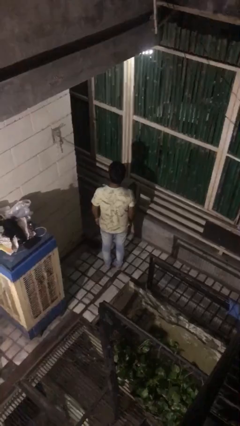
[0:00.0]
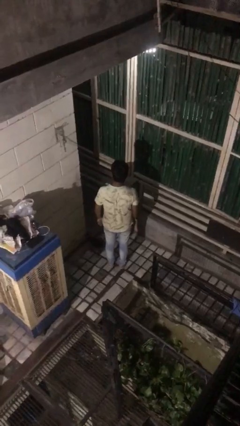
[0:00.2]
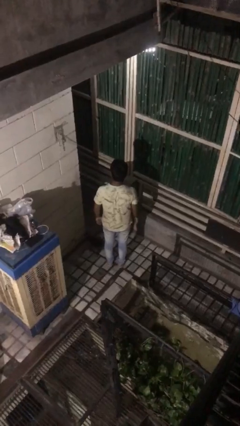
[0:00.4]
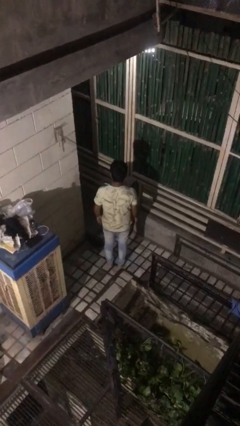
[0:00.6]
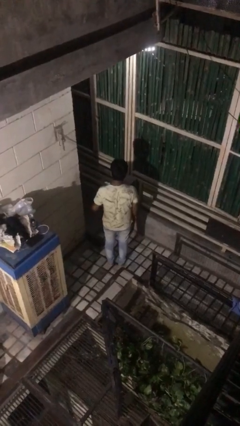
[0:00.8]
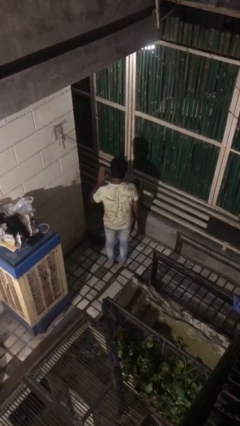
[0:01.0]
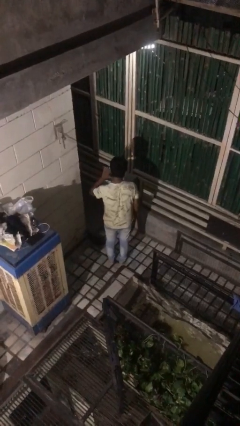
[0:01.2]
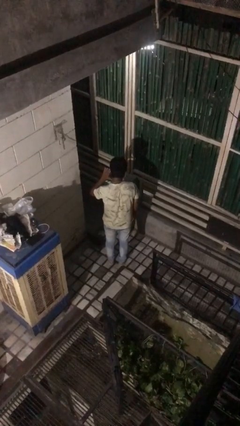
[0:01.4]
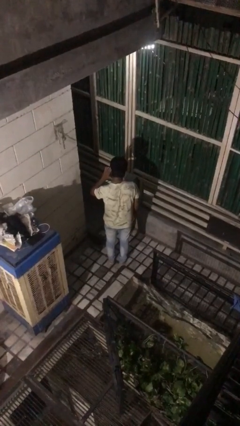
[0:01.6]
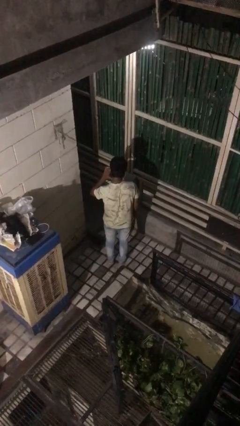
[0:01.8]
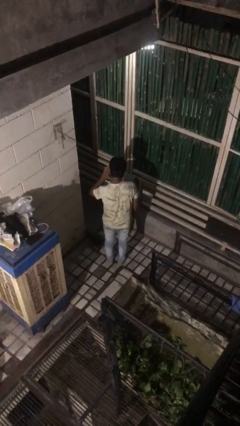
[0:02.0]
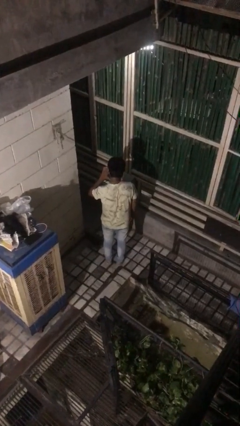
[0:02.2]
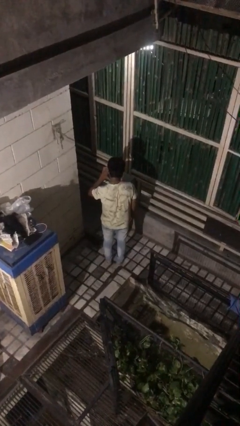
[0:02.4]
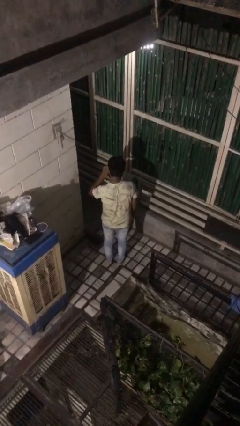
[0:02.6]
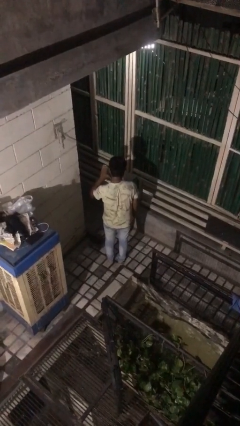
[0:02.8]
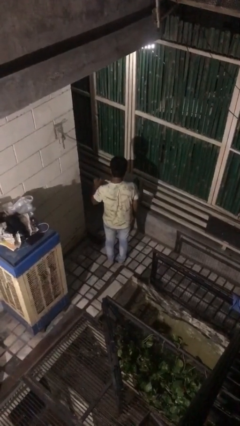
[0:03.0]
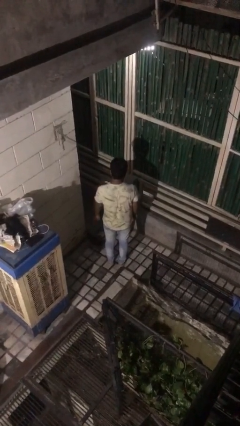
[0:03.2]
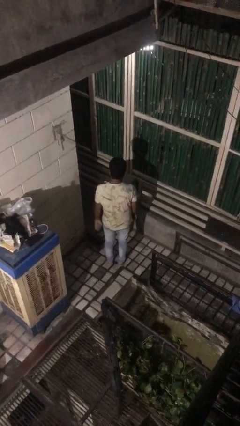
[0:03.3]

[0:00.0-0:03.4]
person gestures listen closely

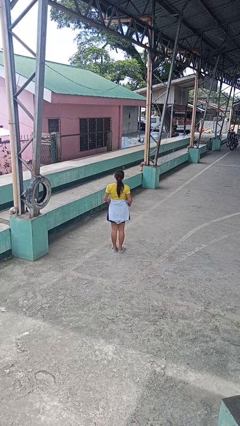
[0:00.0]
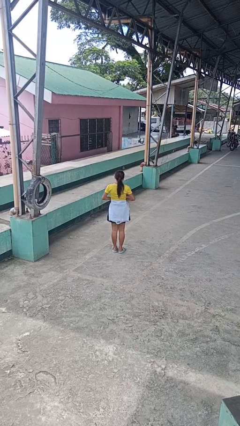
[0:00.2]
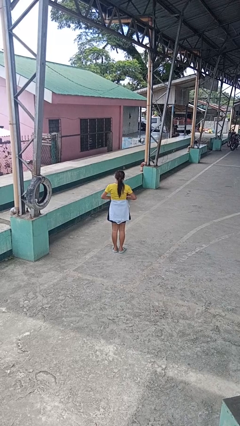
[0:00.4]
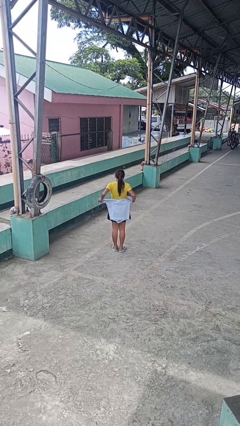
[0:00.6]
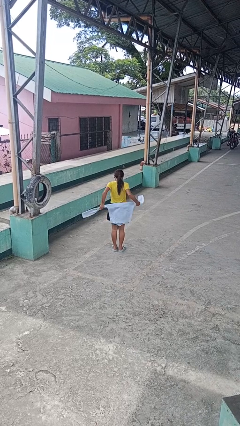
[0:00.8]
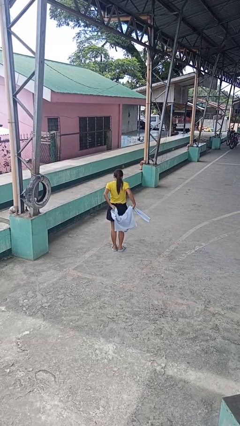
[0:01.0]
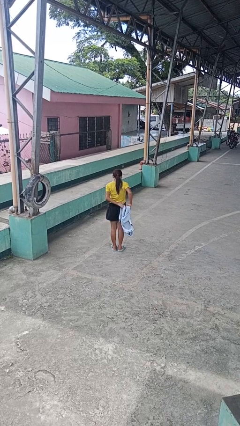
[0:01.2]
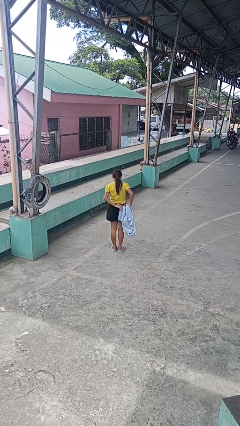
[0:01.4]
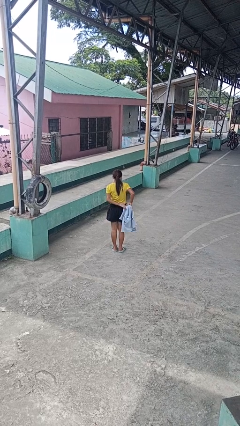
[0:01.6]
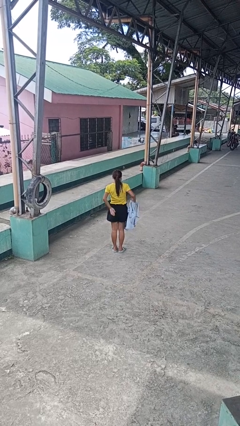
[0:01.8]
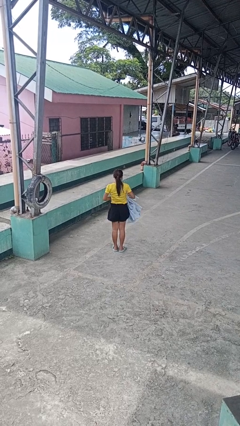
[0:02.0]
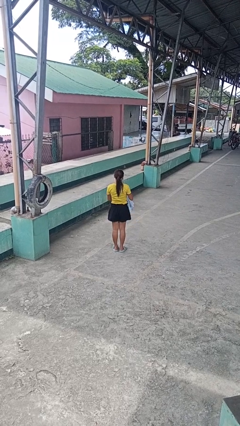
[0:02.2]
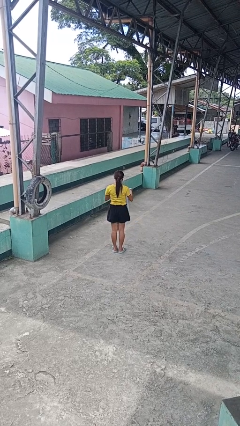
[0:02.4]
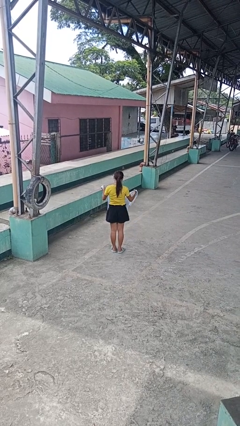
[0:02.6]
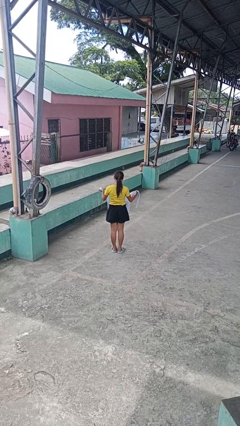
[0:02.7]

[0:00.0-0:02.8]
person unties jacket around waist

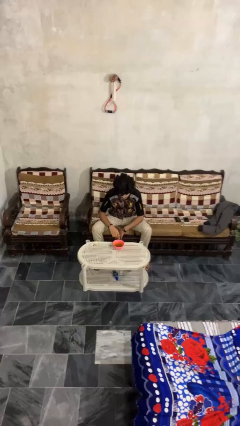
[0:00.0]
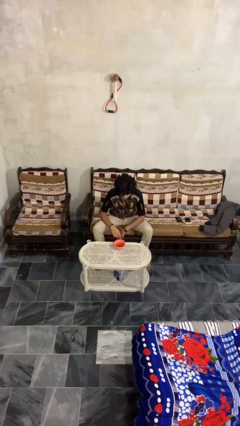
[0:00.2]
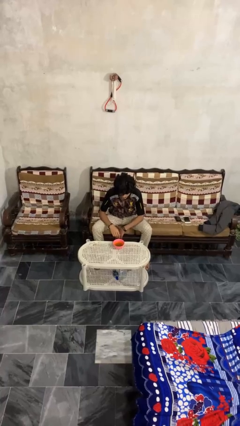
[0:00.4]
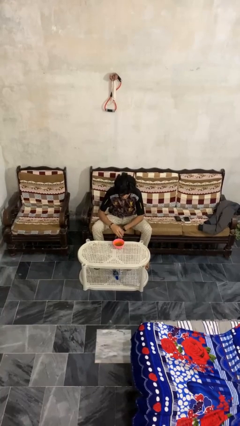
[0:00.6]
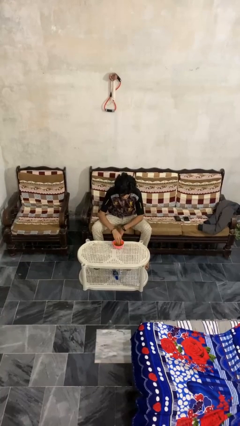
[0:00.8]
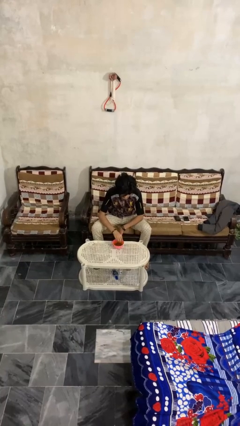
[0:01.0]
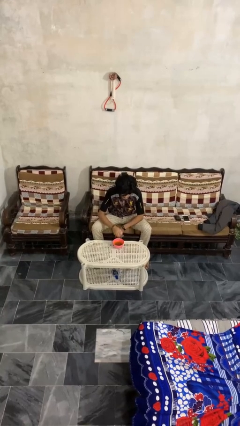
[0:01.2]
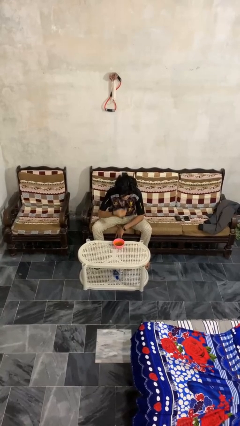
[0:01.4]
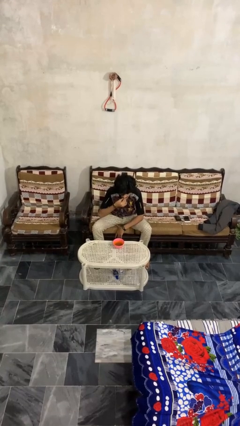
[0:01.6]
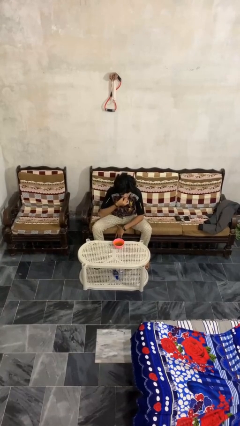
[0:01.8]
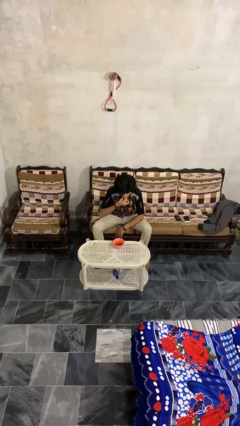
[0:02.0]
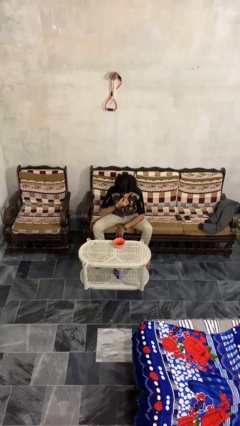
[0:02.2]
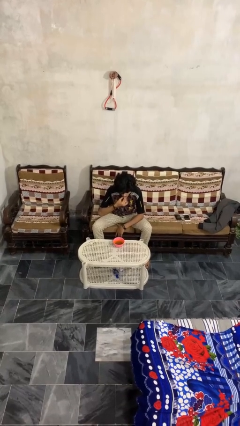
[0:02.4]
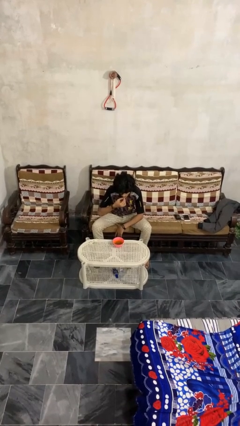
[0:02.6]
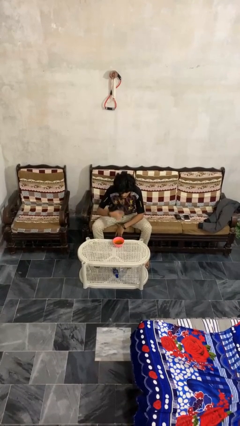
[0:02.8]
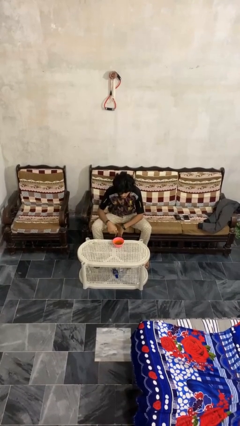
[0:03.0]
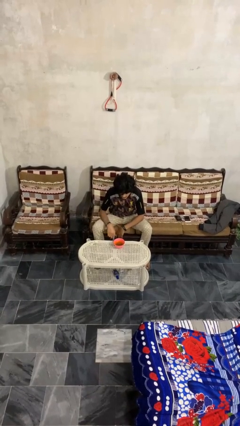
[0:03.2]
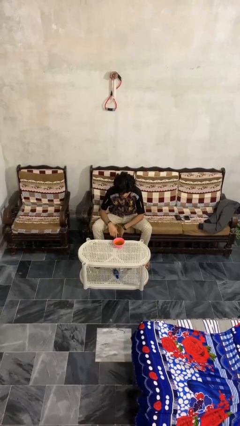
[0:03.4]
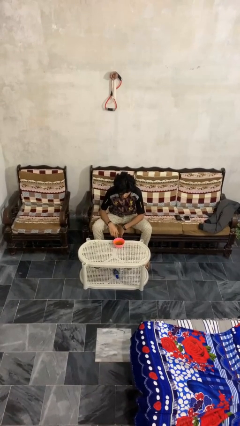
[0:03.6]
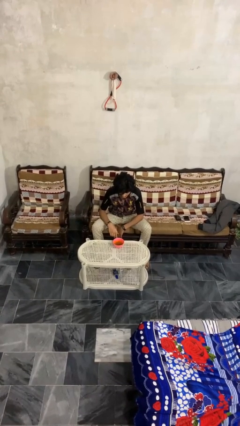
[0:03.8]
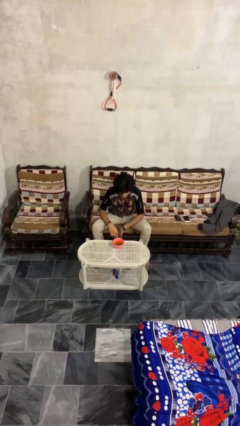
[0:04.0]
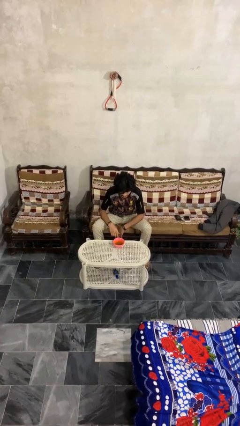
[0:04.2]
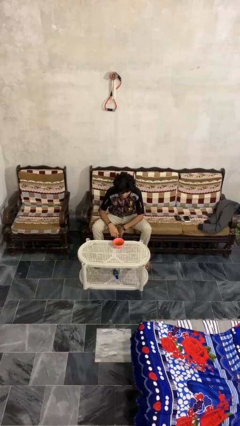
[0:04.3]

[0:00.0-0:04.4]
person eats with hands

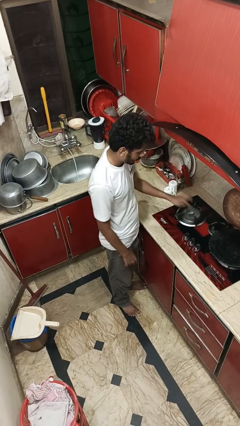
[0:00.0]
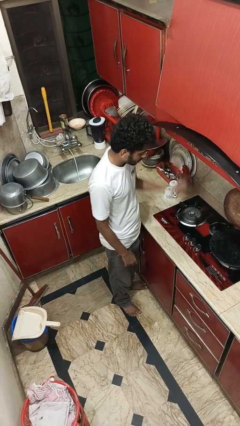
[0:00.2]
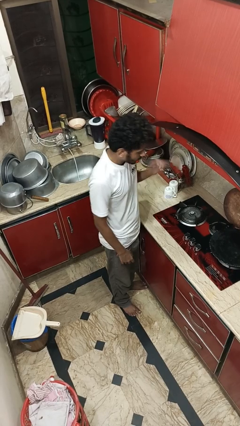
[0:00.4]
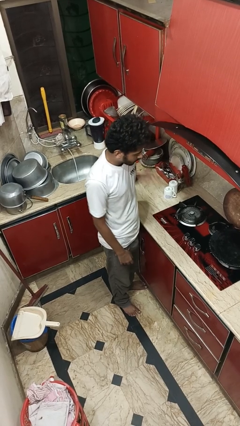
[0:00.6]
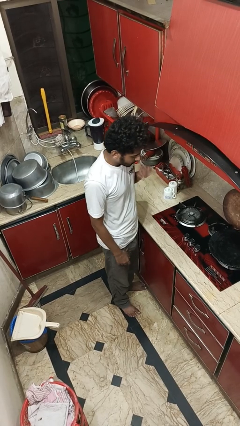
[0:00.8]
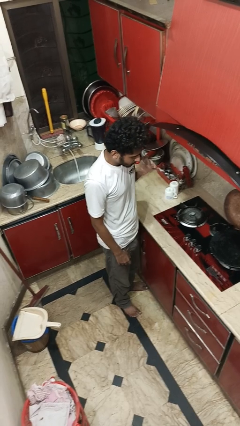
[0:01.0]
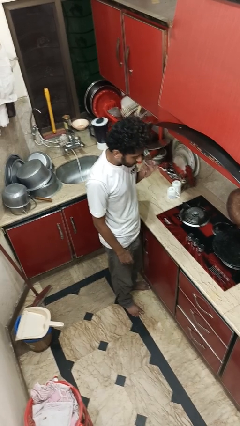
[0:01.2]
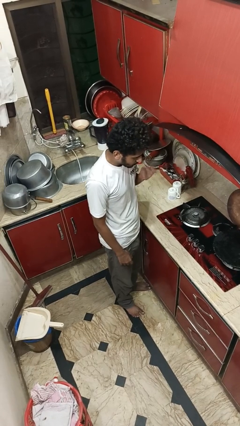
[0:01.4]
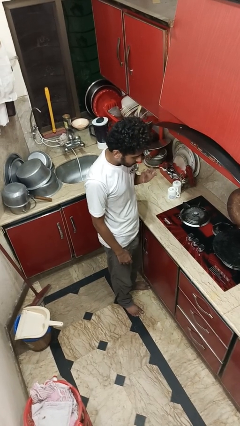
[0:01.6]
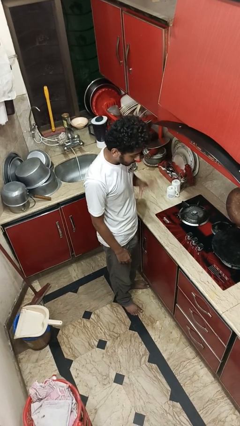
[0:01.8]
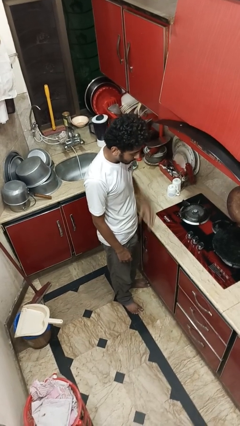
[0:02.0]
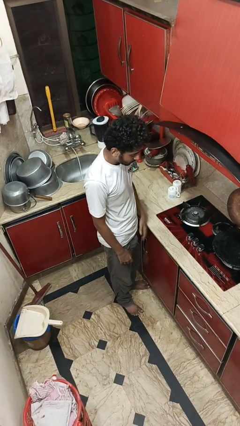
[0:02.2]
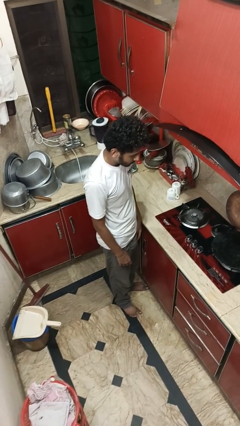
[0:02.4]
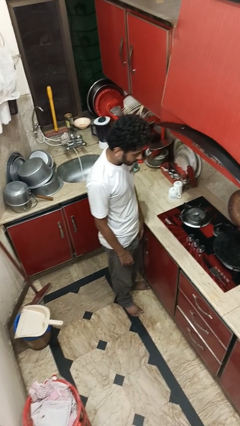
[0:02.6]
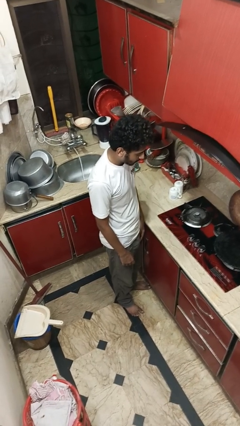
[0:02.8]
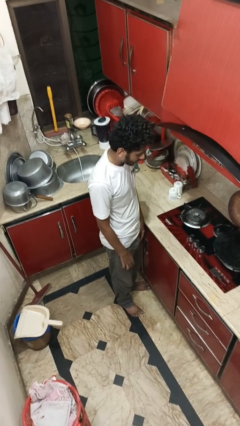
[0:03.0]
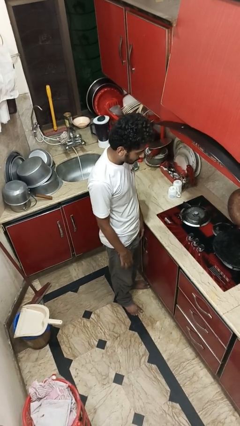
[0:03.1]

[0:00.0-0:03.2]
person burns hand

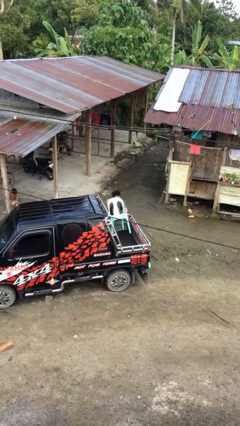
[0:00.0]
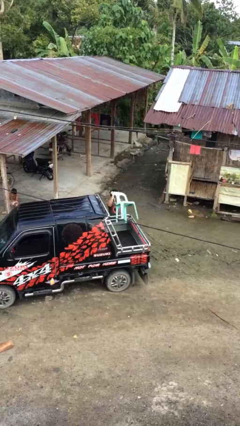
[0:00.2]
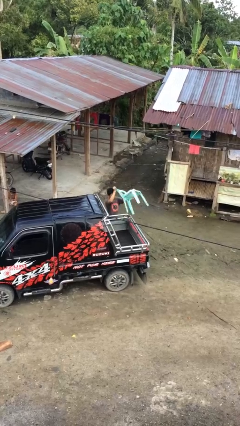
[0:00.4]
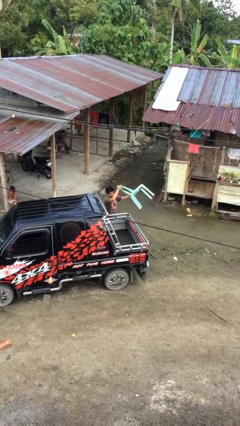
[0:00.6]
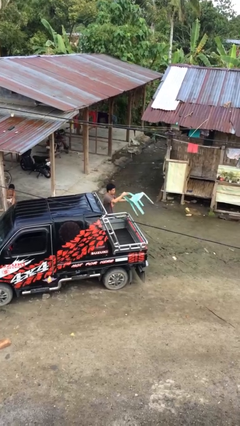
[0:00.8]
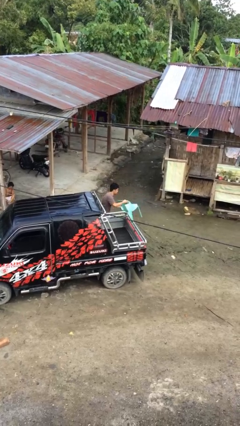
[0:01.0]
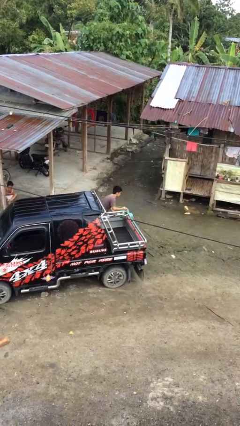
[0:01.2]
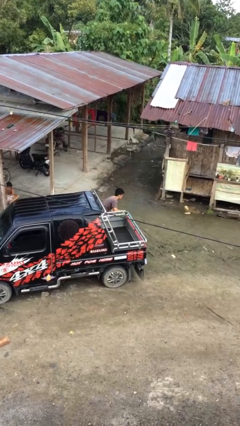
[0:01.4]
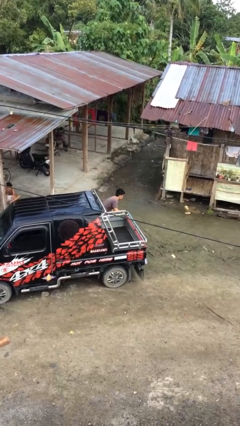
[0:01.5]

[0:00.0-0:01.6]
person unloads car

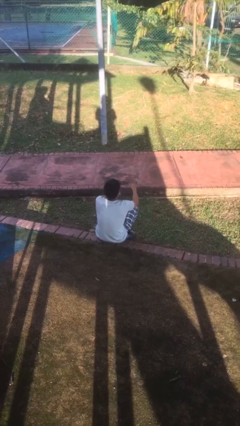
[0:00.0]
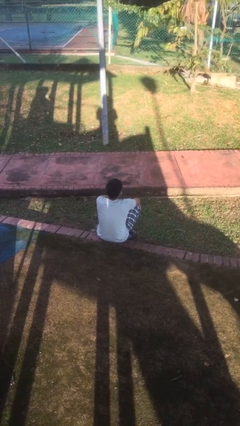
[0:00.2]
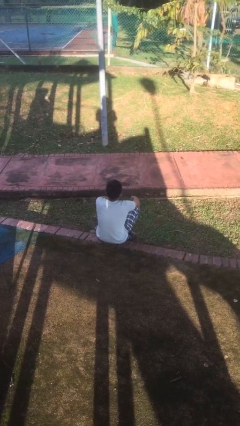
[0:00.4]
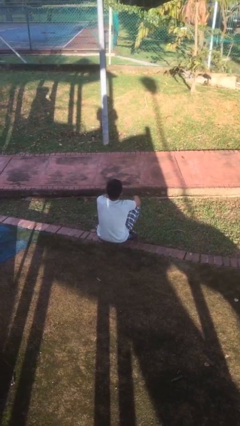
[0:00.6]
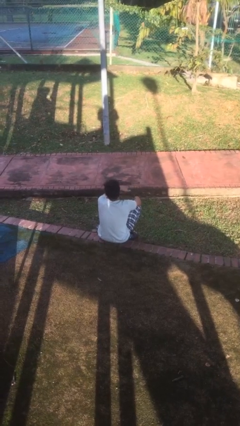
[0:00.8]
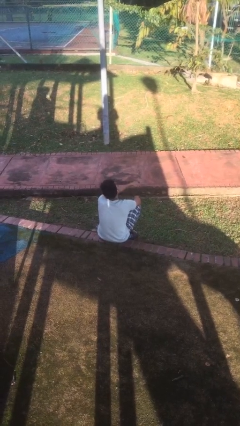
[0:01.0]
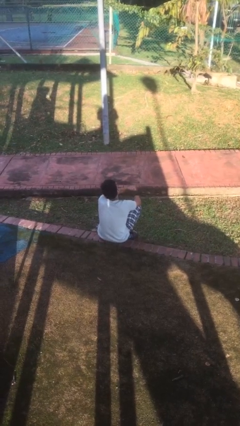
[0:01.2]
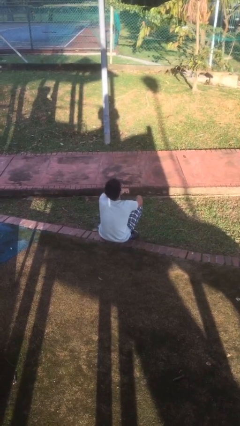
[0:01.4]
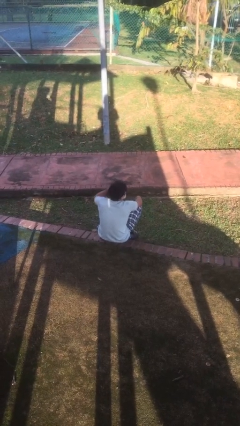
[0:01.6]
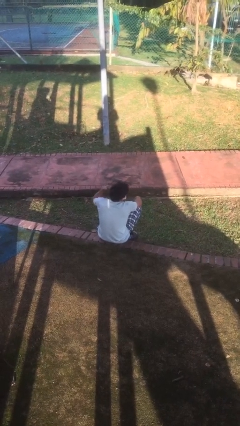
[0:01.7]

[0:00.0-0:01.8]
person gestures cut
